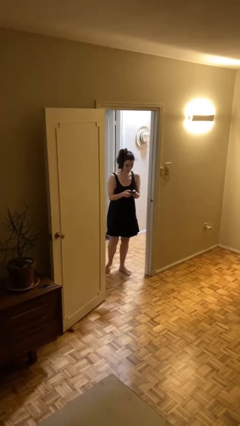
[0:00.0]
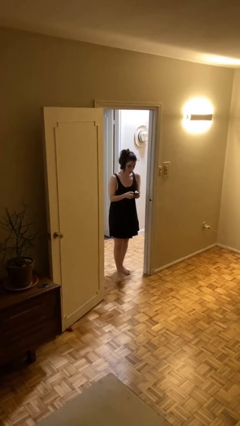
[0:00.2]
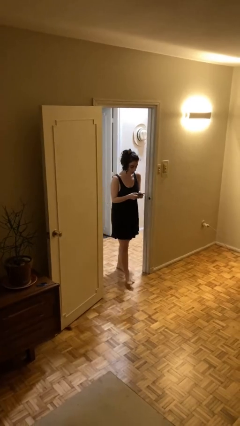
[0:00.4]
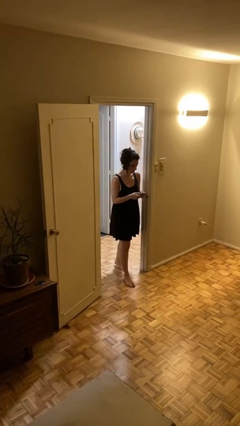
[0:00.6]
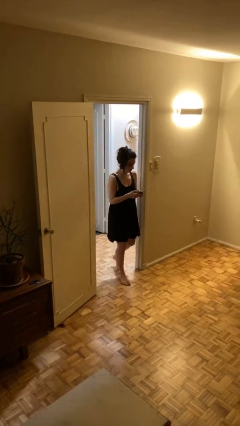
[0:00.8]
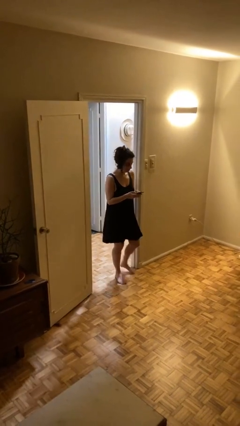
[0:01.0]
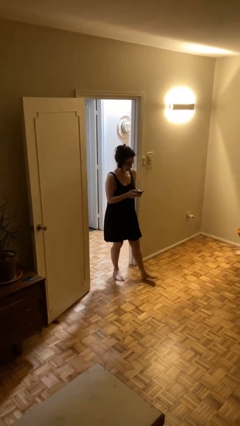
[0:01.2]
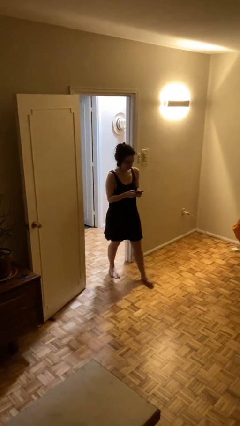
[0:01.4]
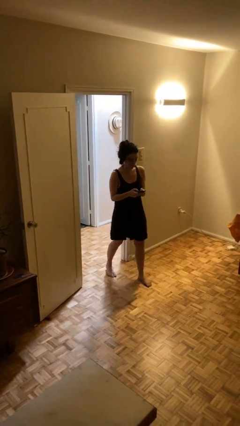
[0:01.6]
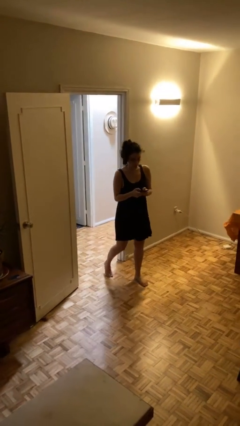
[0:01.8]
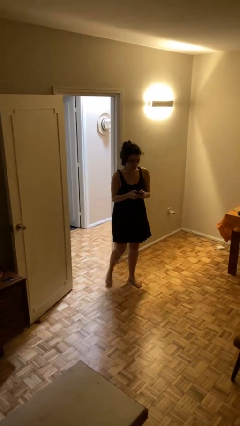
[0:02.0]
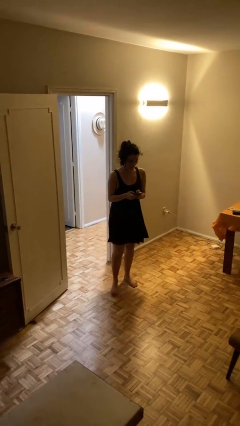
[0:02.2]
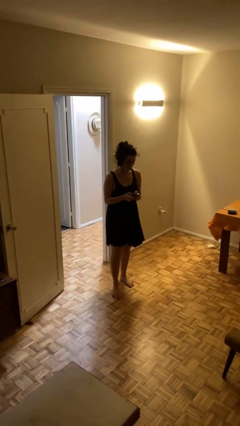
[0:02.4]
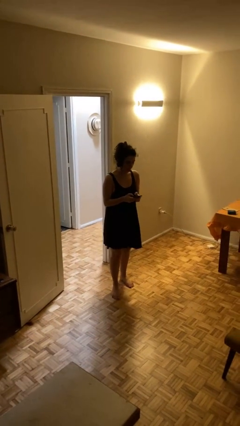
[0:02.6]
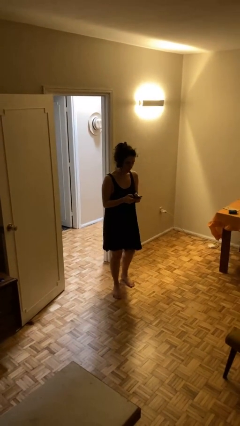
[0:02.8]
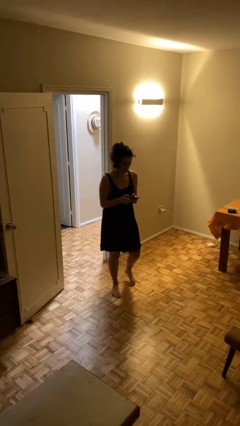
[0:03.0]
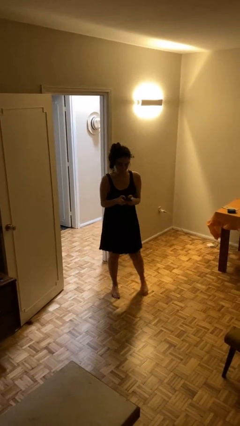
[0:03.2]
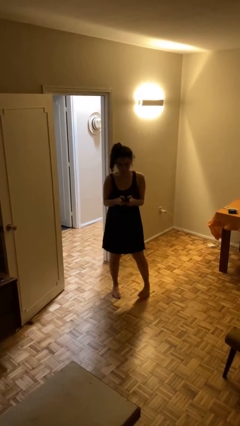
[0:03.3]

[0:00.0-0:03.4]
person enters scene through structure

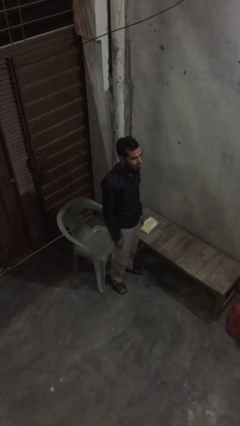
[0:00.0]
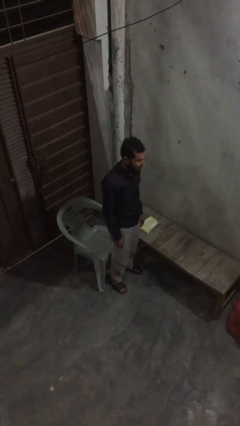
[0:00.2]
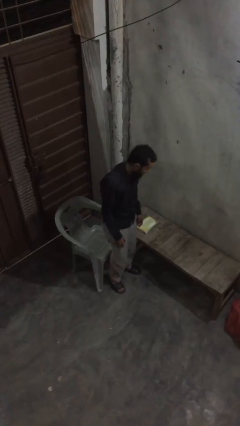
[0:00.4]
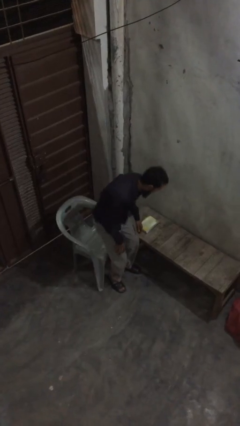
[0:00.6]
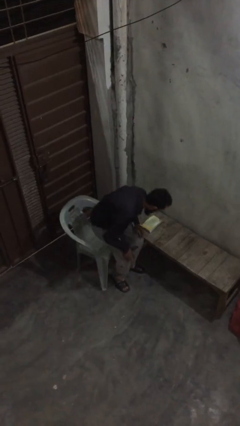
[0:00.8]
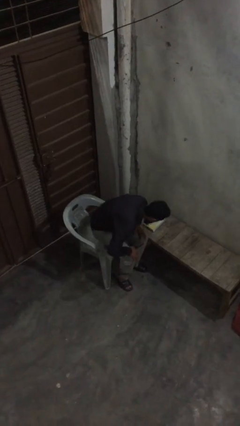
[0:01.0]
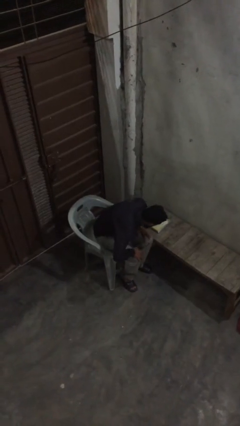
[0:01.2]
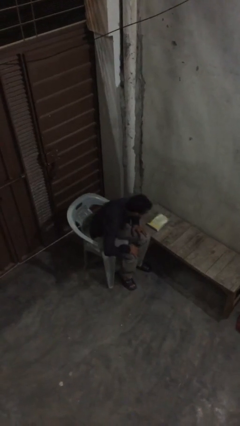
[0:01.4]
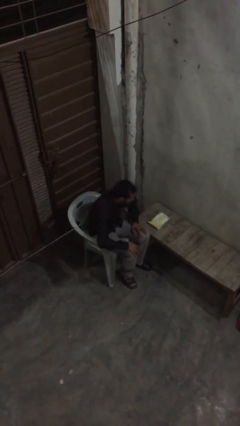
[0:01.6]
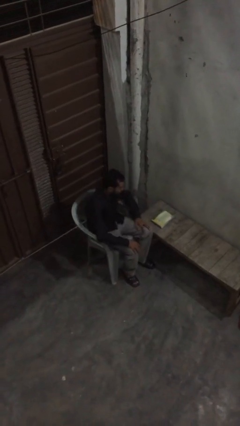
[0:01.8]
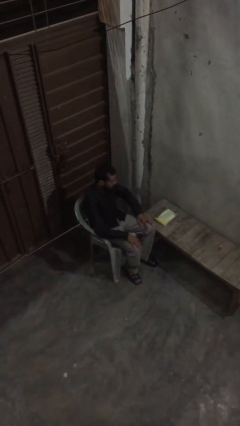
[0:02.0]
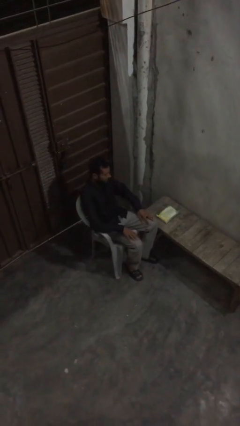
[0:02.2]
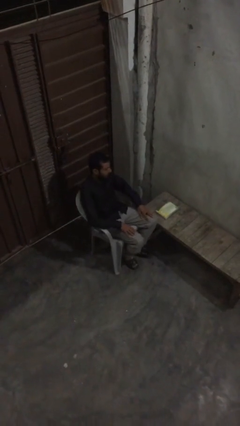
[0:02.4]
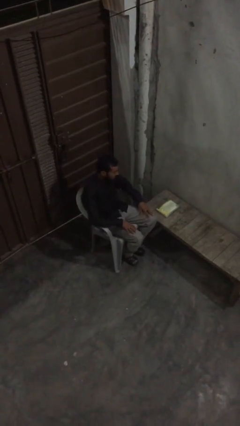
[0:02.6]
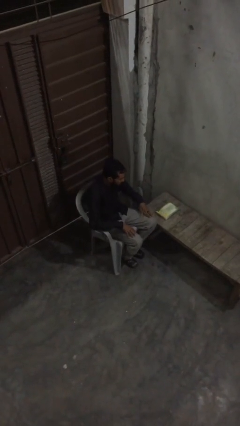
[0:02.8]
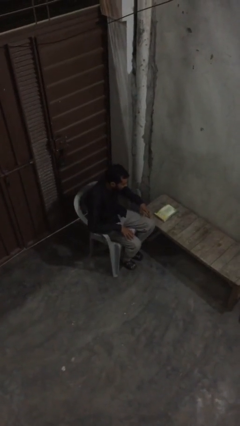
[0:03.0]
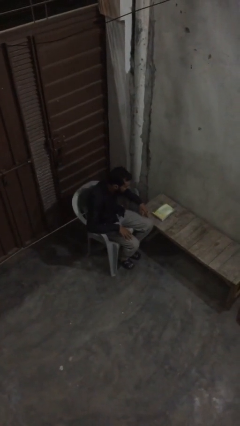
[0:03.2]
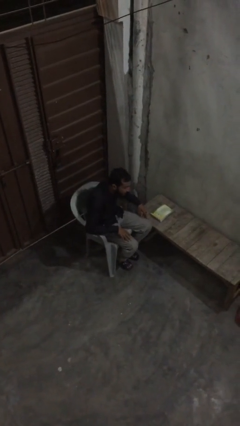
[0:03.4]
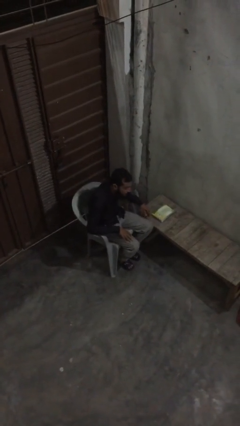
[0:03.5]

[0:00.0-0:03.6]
person sits down

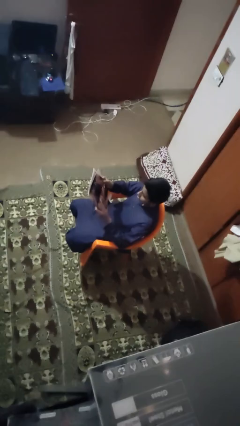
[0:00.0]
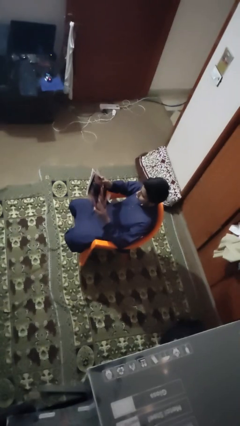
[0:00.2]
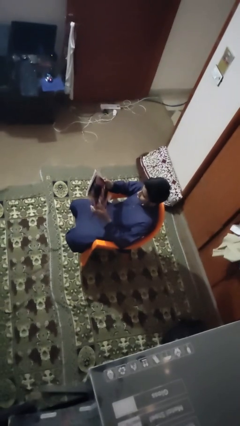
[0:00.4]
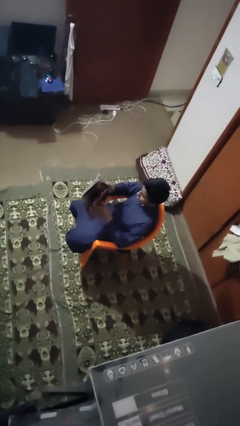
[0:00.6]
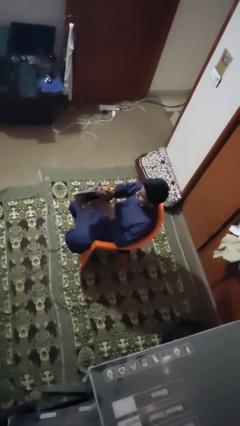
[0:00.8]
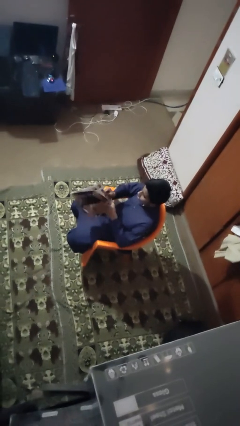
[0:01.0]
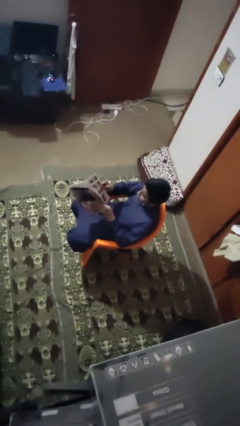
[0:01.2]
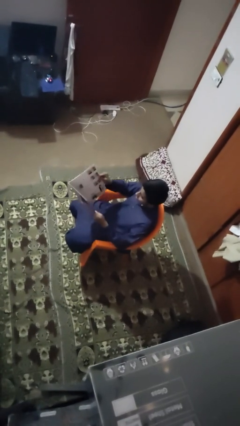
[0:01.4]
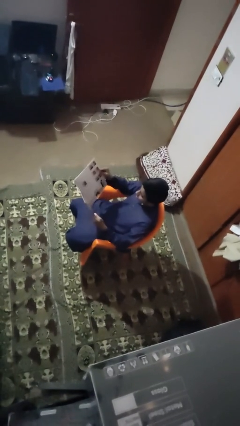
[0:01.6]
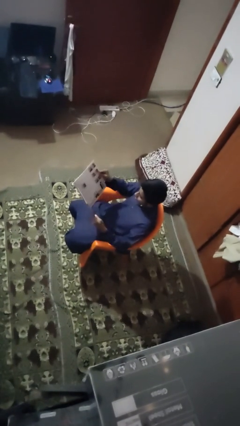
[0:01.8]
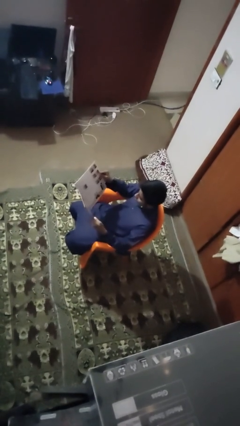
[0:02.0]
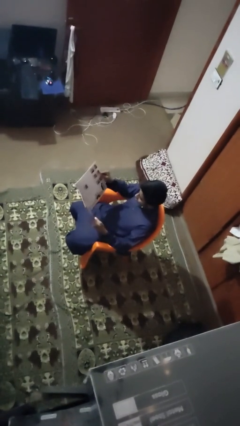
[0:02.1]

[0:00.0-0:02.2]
person reads magazine

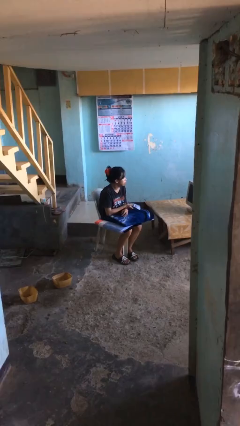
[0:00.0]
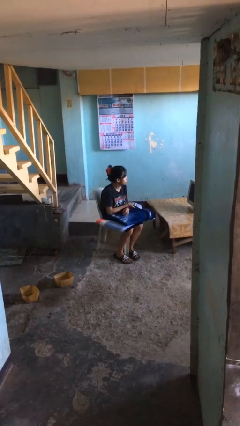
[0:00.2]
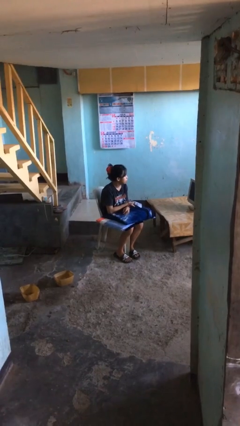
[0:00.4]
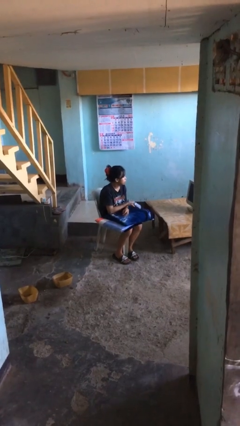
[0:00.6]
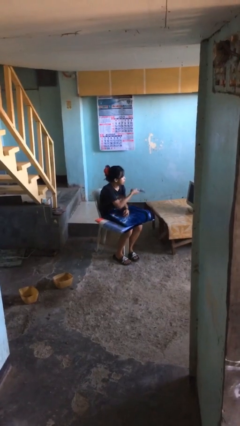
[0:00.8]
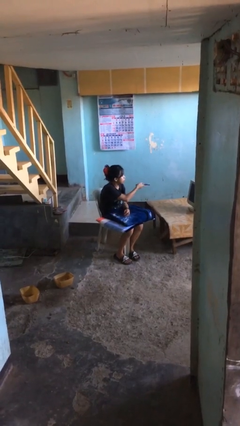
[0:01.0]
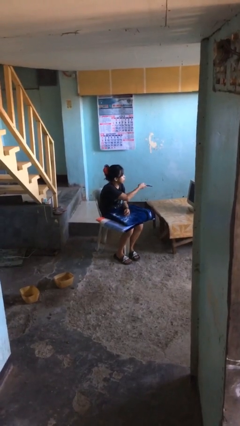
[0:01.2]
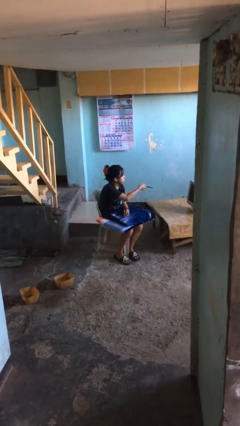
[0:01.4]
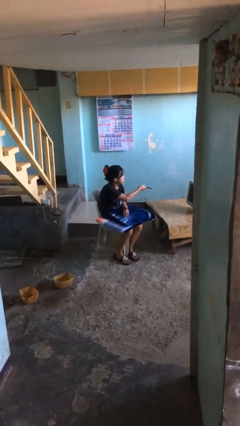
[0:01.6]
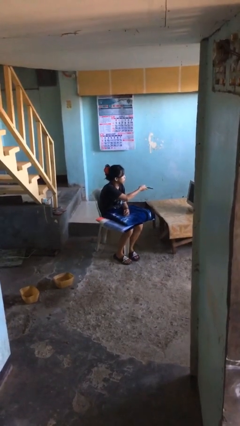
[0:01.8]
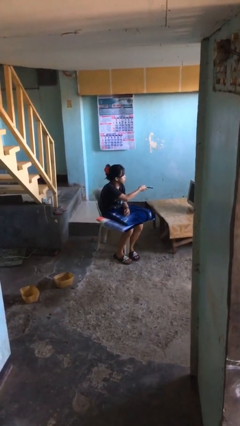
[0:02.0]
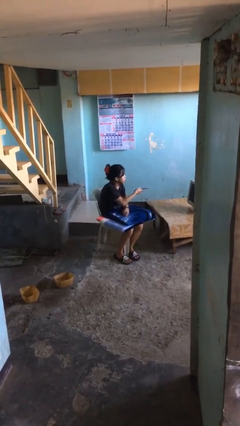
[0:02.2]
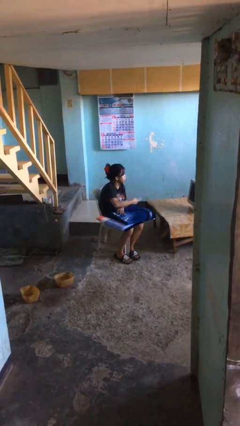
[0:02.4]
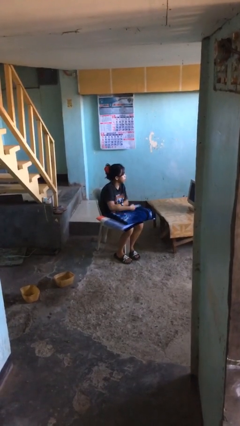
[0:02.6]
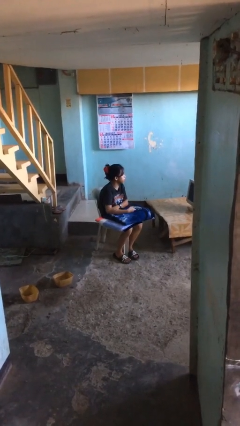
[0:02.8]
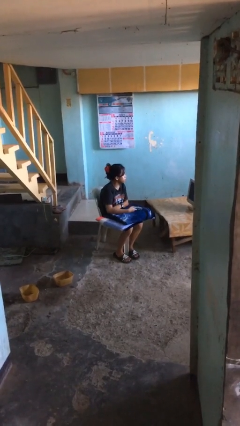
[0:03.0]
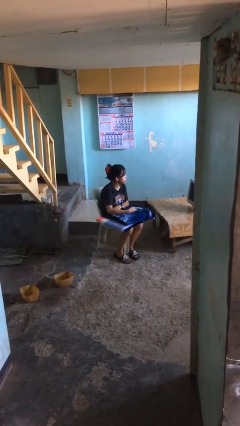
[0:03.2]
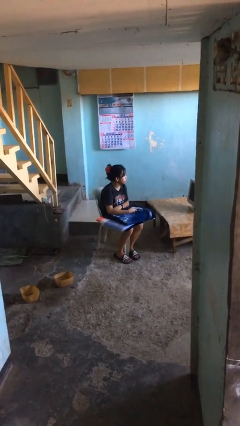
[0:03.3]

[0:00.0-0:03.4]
person uses television remote

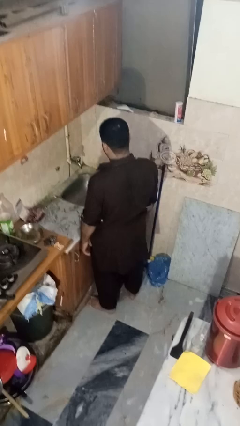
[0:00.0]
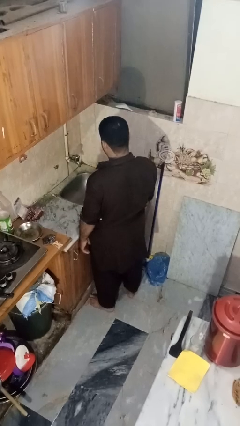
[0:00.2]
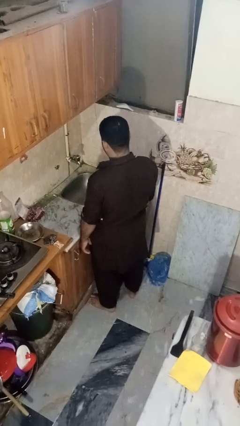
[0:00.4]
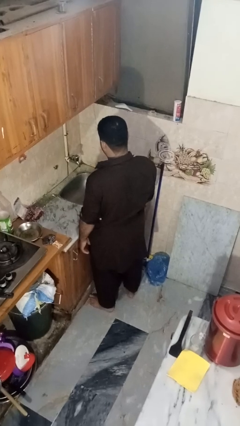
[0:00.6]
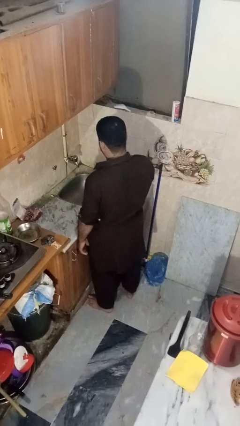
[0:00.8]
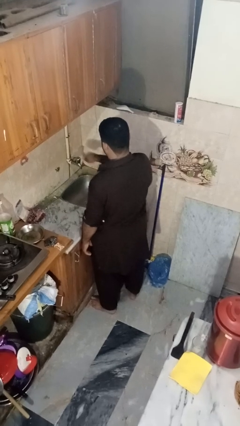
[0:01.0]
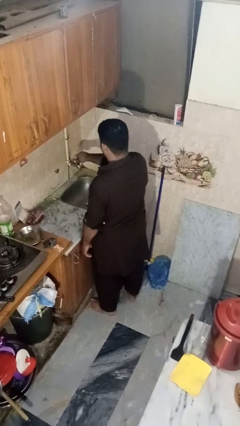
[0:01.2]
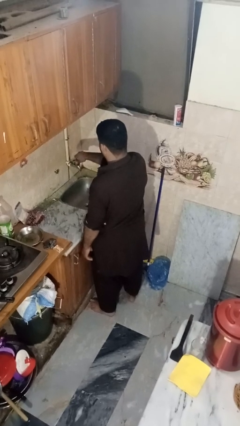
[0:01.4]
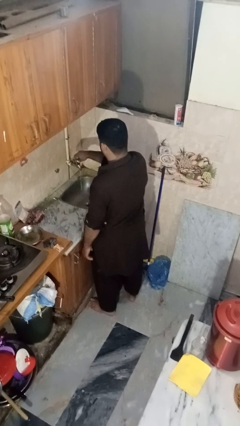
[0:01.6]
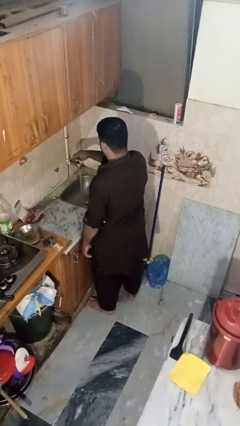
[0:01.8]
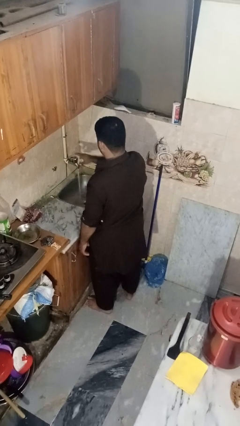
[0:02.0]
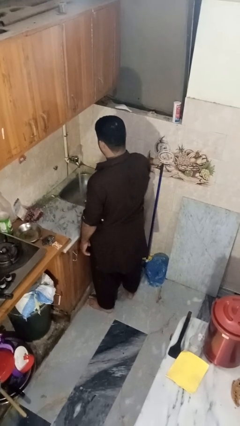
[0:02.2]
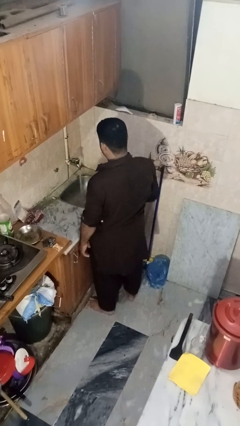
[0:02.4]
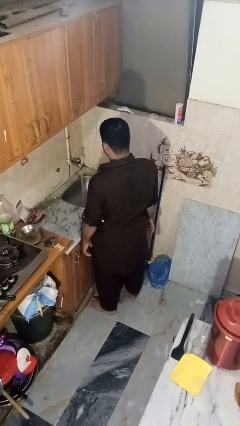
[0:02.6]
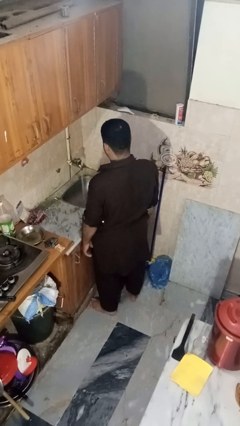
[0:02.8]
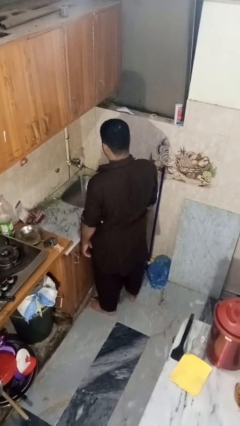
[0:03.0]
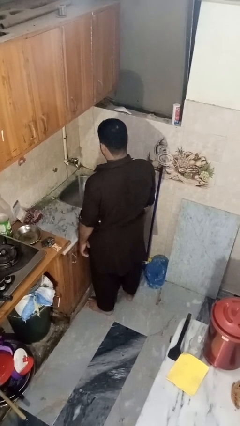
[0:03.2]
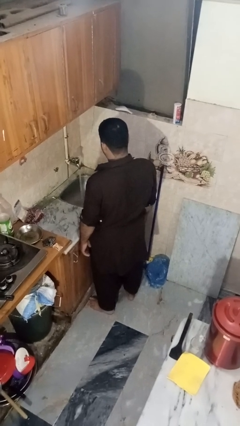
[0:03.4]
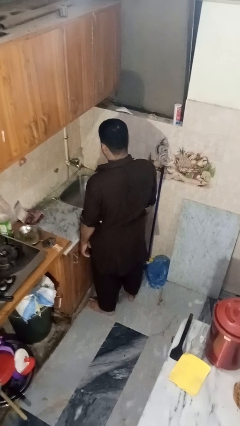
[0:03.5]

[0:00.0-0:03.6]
person turns on faucet

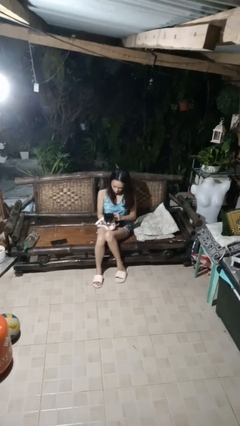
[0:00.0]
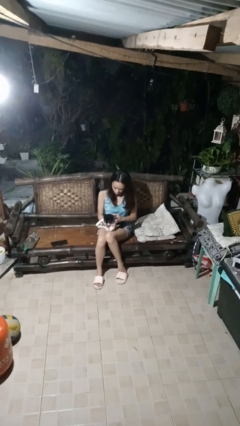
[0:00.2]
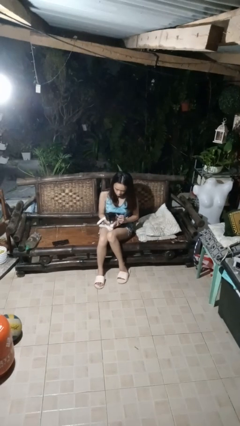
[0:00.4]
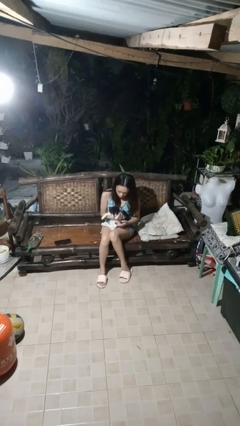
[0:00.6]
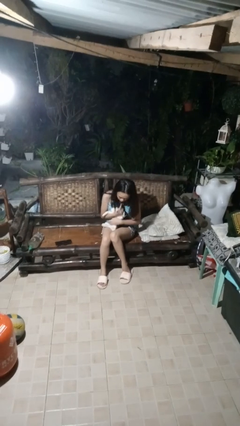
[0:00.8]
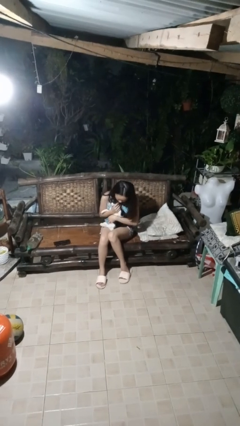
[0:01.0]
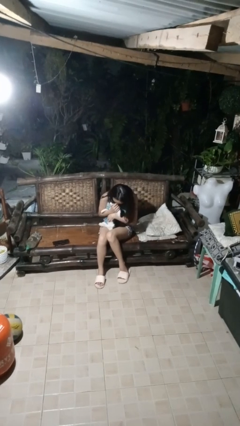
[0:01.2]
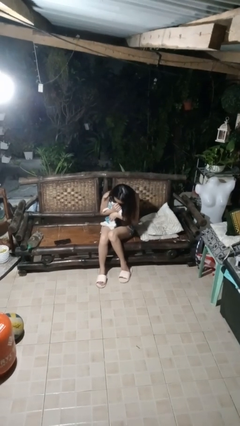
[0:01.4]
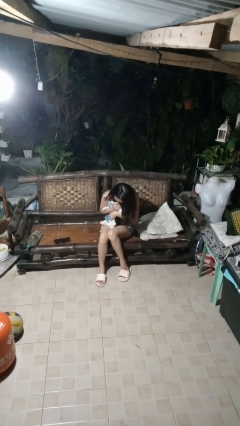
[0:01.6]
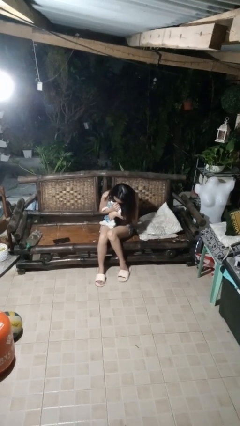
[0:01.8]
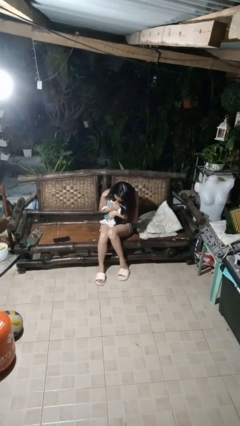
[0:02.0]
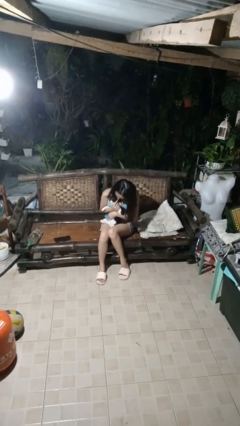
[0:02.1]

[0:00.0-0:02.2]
person hugs cat
